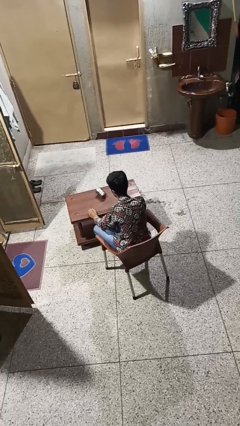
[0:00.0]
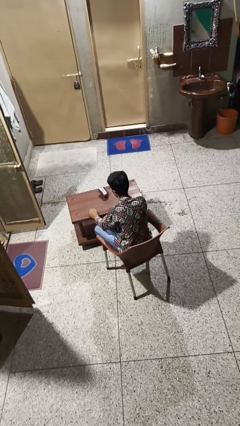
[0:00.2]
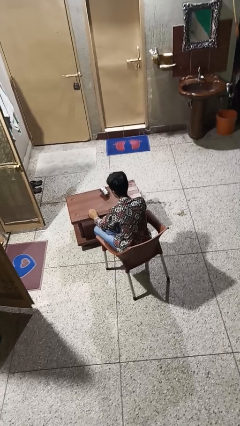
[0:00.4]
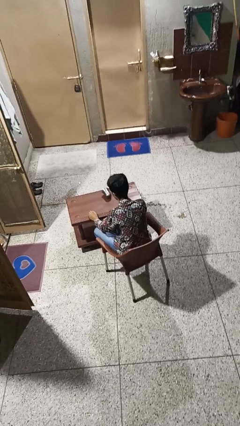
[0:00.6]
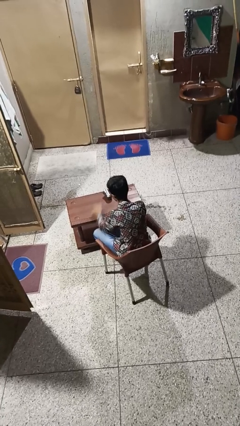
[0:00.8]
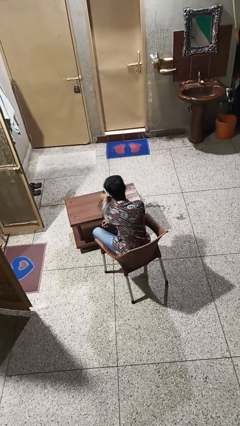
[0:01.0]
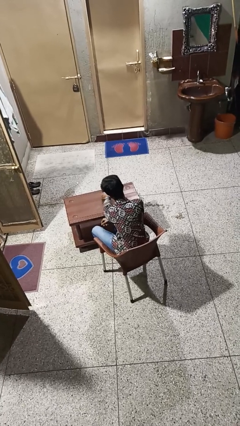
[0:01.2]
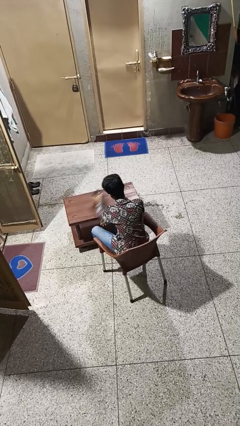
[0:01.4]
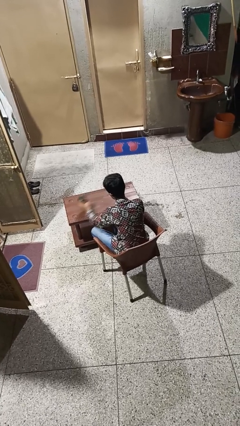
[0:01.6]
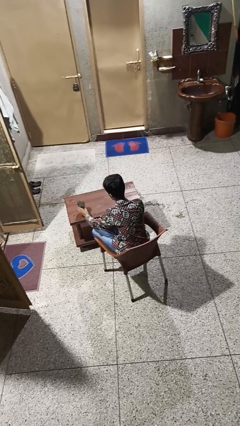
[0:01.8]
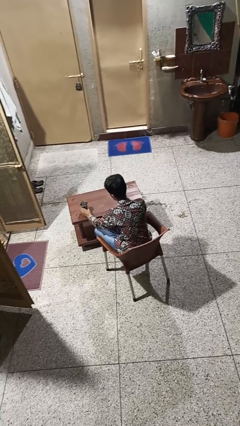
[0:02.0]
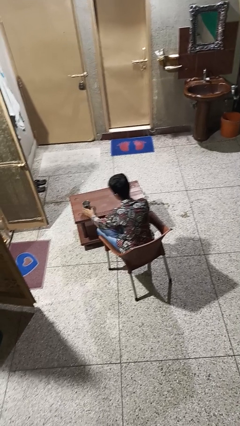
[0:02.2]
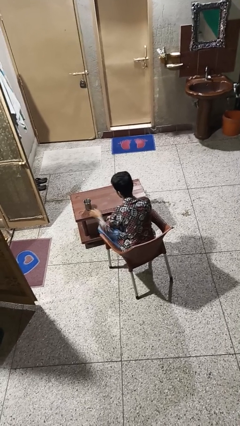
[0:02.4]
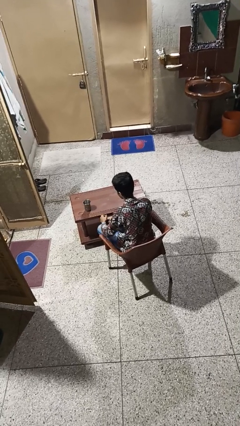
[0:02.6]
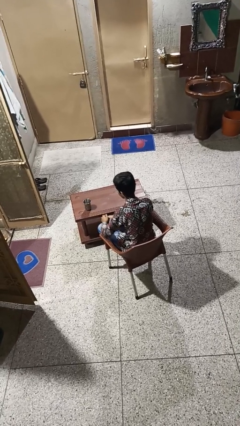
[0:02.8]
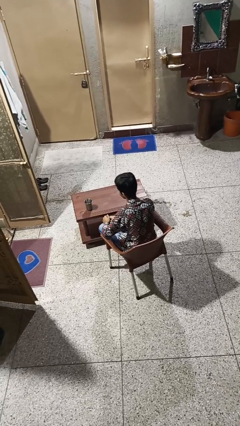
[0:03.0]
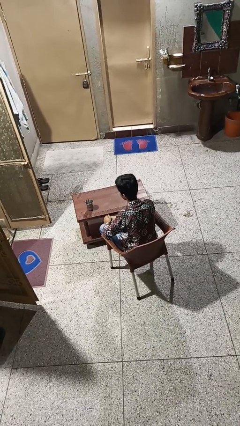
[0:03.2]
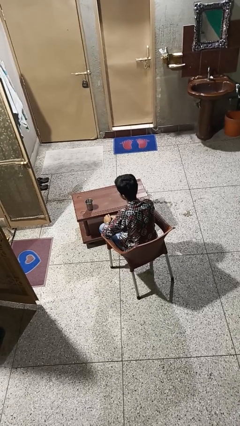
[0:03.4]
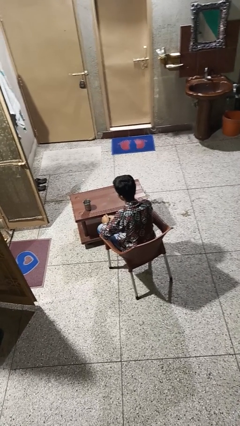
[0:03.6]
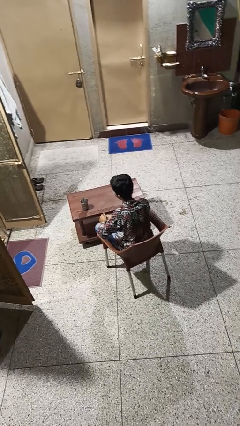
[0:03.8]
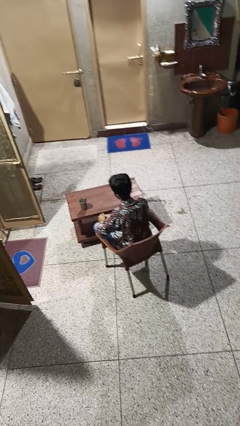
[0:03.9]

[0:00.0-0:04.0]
person sets upright glass

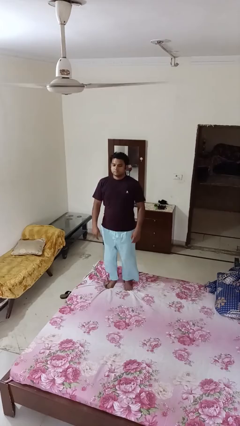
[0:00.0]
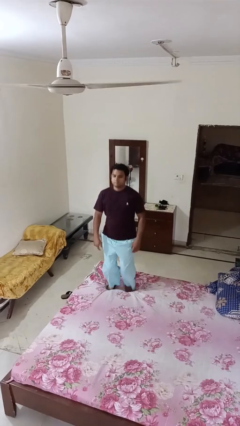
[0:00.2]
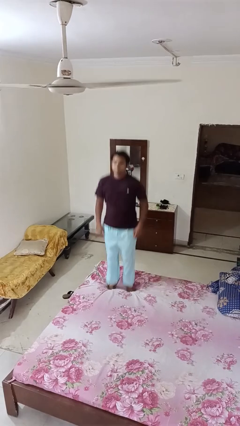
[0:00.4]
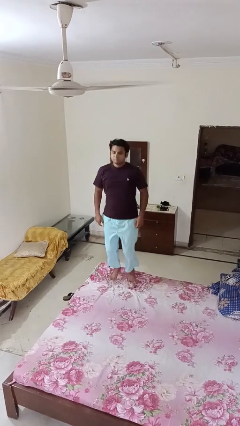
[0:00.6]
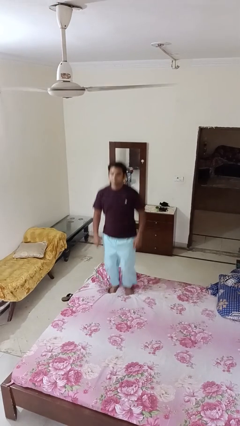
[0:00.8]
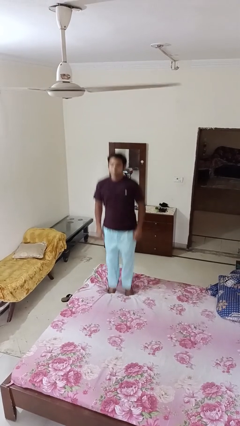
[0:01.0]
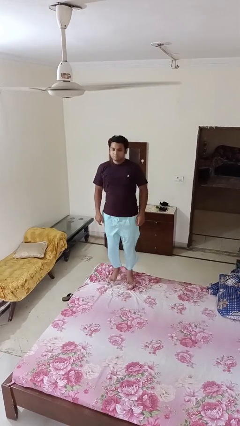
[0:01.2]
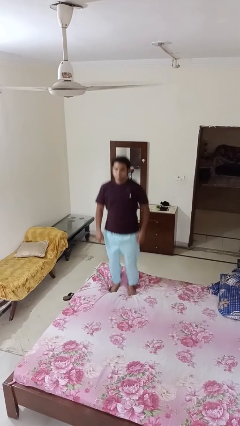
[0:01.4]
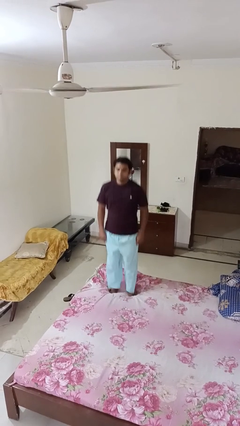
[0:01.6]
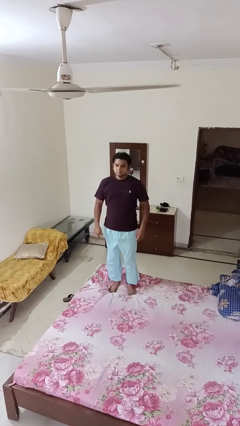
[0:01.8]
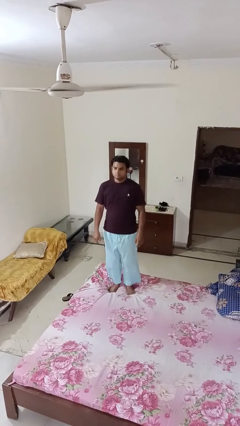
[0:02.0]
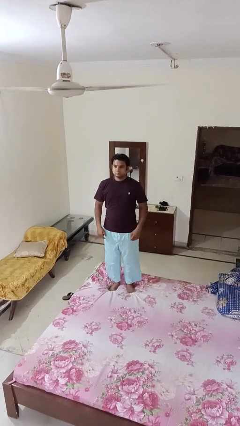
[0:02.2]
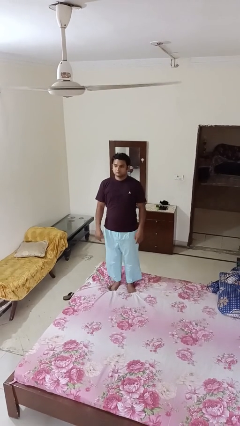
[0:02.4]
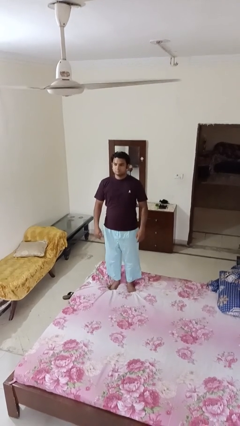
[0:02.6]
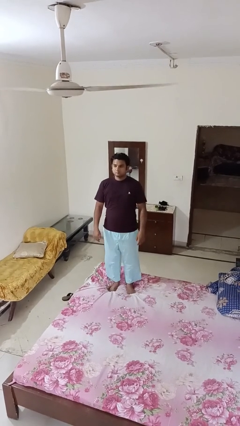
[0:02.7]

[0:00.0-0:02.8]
person jumps on bed

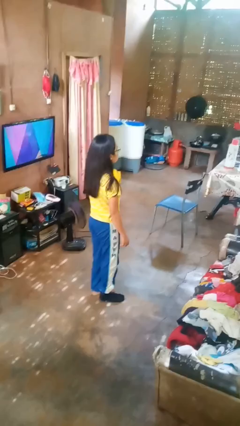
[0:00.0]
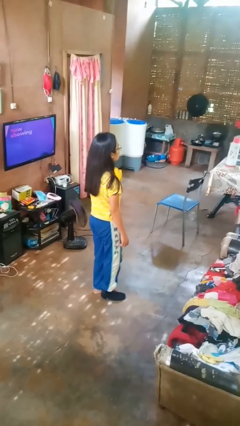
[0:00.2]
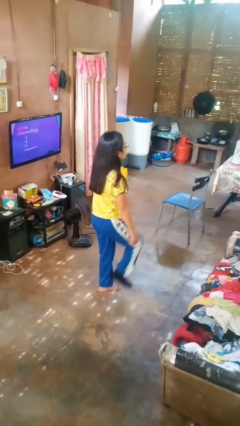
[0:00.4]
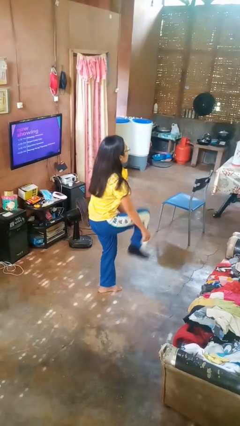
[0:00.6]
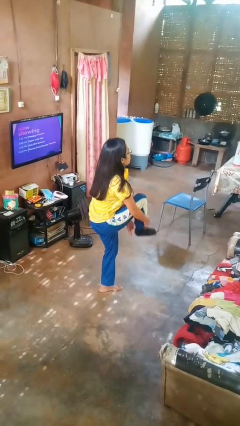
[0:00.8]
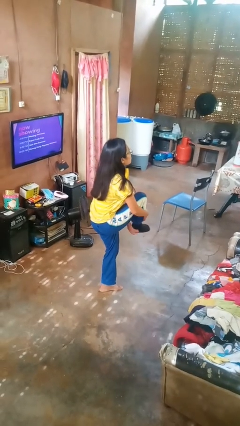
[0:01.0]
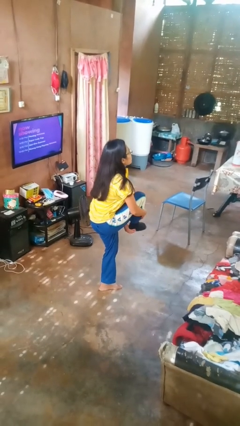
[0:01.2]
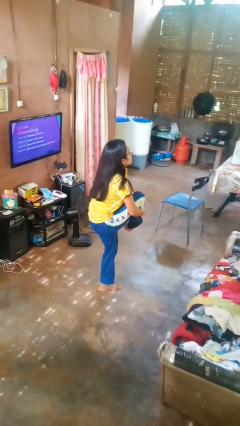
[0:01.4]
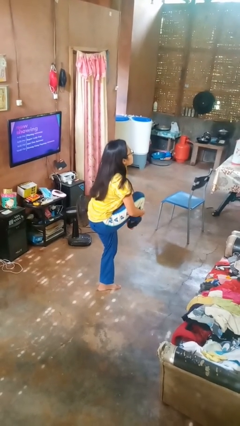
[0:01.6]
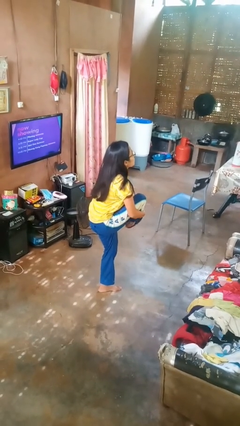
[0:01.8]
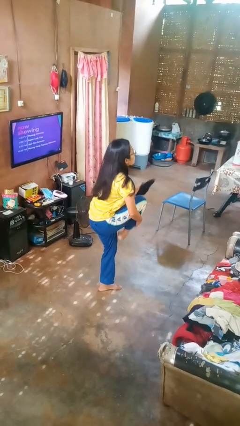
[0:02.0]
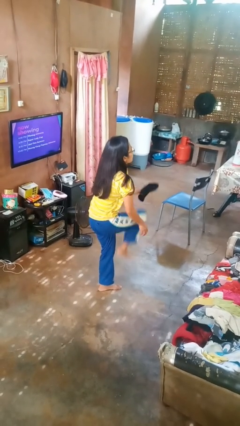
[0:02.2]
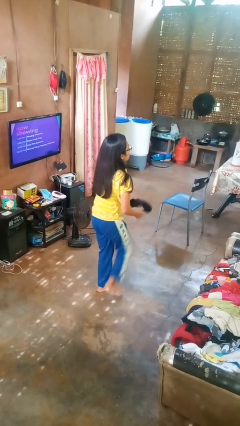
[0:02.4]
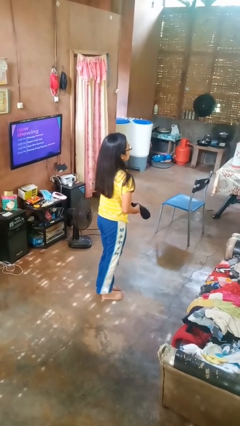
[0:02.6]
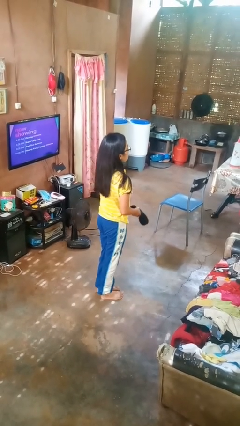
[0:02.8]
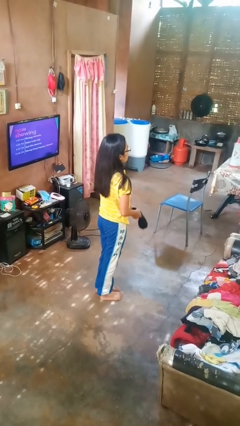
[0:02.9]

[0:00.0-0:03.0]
person takes off socks

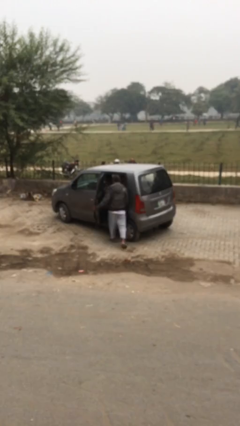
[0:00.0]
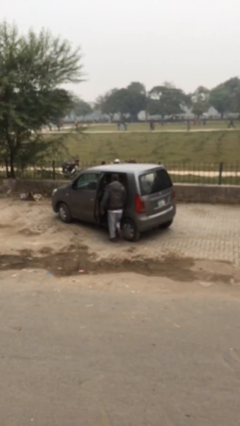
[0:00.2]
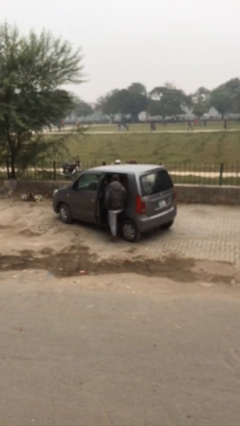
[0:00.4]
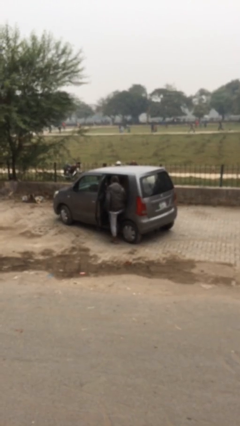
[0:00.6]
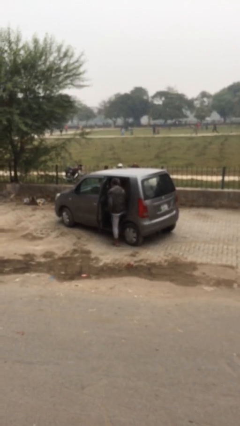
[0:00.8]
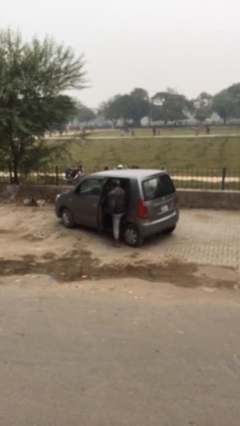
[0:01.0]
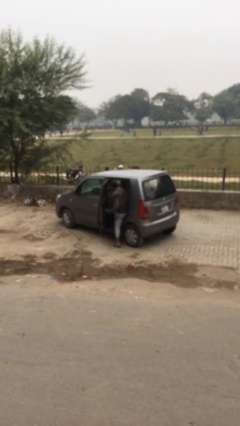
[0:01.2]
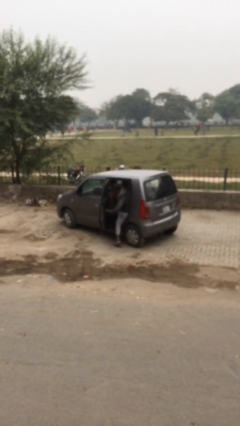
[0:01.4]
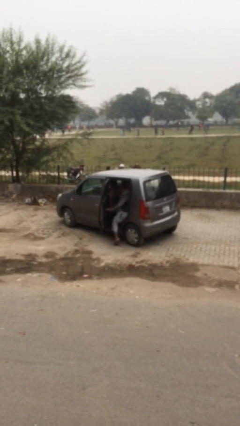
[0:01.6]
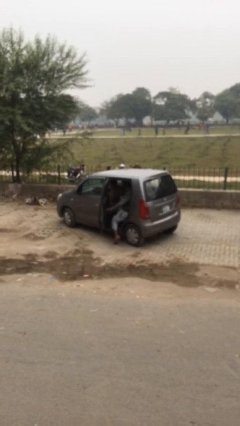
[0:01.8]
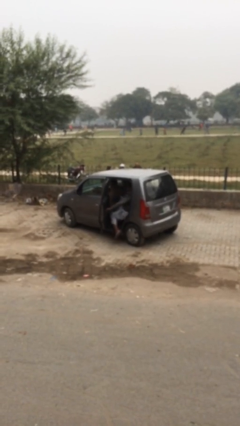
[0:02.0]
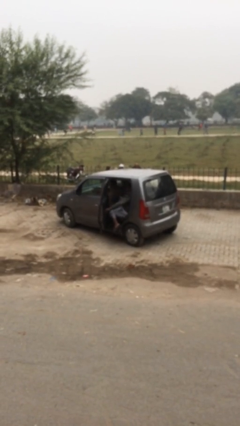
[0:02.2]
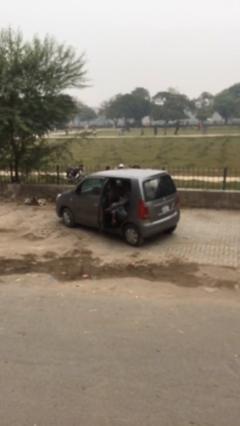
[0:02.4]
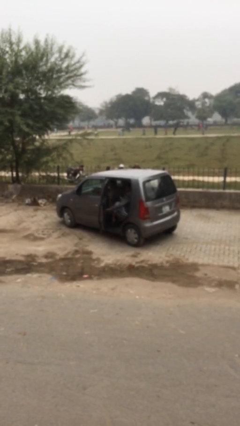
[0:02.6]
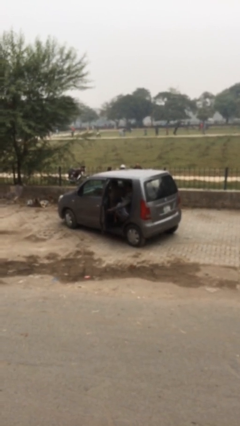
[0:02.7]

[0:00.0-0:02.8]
person enters car

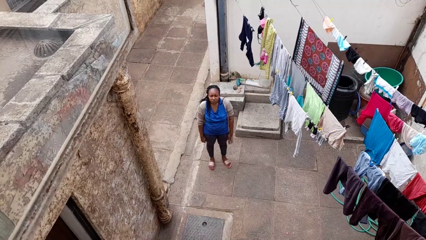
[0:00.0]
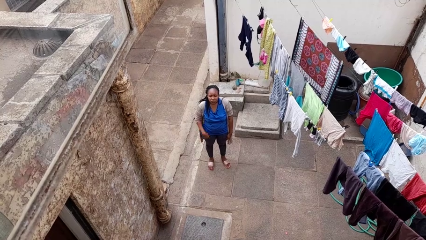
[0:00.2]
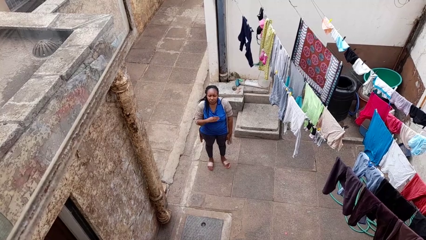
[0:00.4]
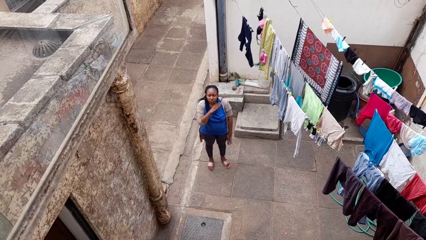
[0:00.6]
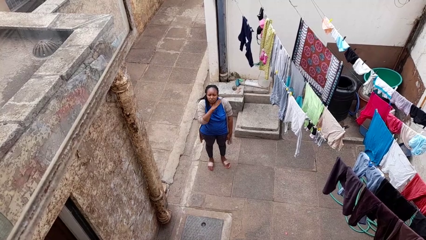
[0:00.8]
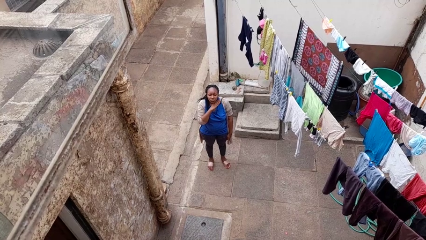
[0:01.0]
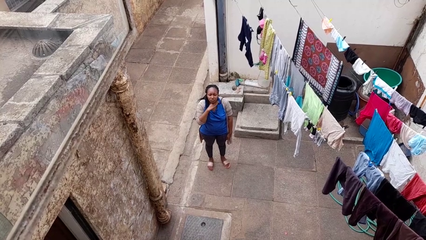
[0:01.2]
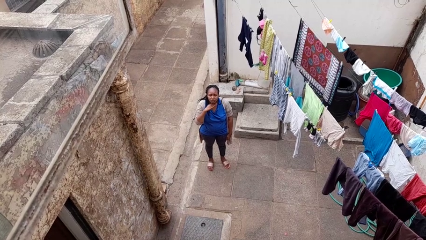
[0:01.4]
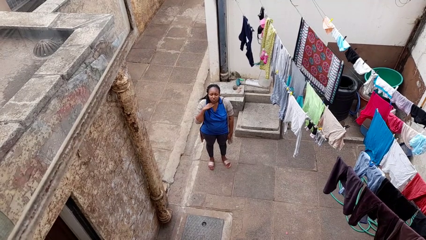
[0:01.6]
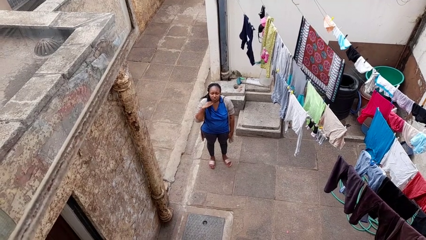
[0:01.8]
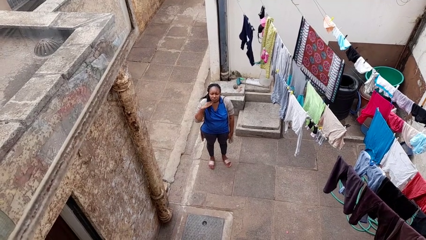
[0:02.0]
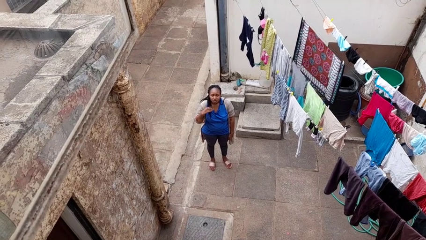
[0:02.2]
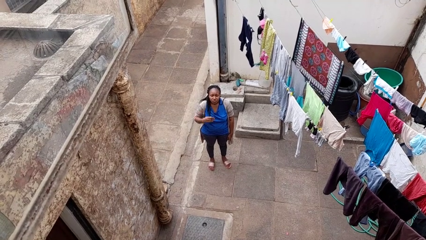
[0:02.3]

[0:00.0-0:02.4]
person gestures cut

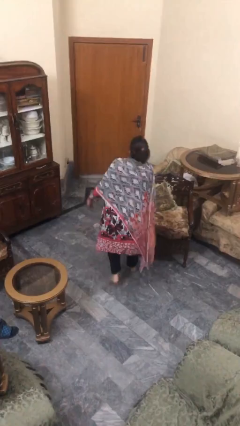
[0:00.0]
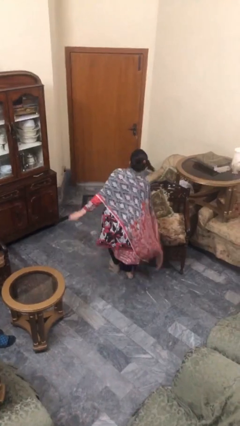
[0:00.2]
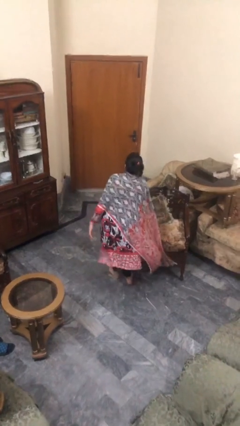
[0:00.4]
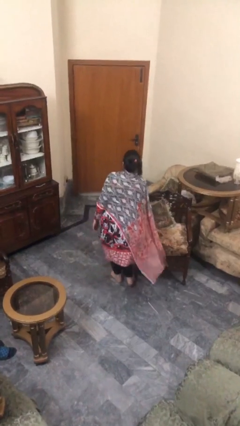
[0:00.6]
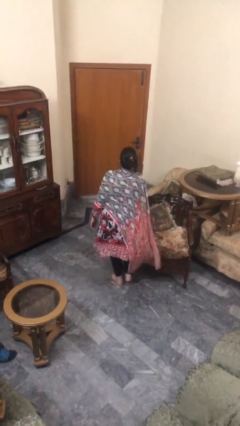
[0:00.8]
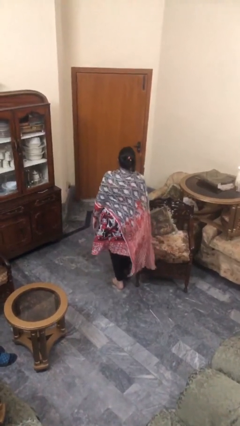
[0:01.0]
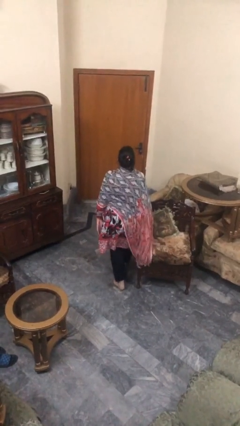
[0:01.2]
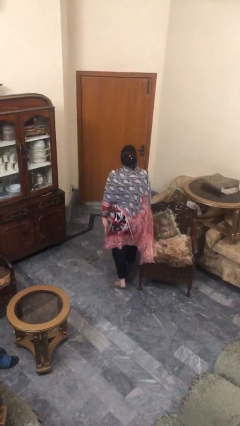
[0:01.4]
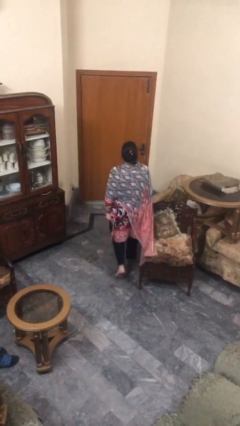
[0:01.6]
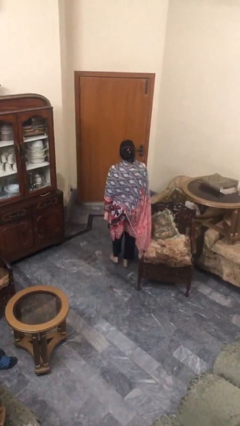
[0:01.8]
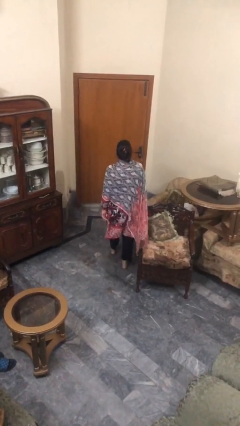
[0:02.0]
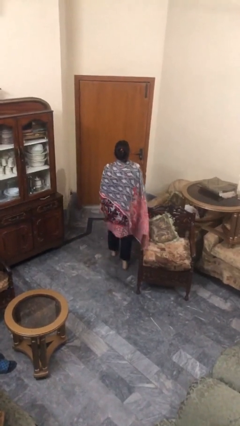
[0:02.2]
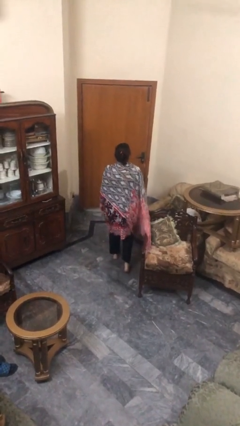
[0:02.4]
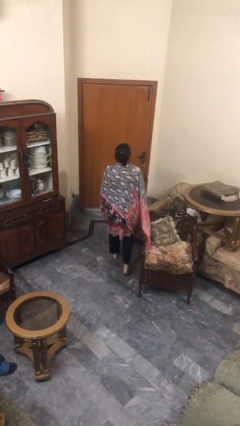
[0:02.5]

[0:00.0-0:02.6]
person stubs toe
